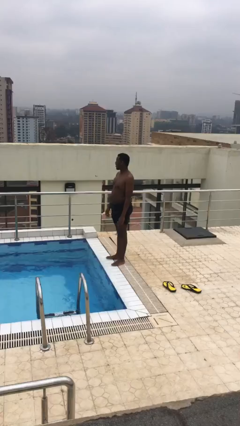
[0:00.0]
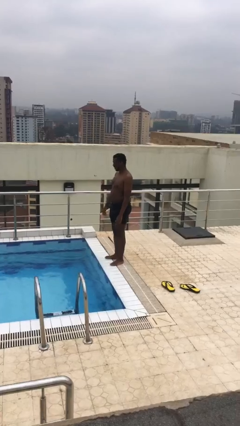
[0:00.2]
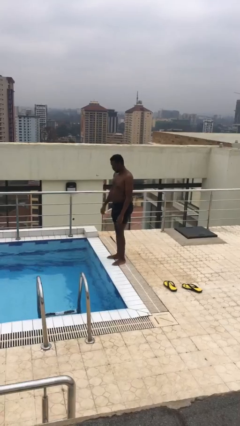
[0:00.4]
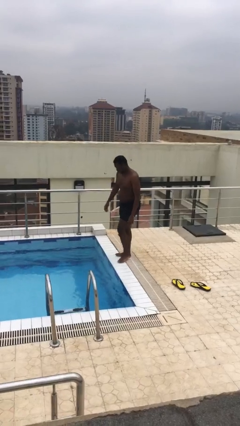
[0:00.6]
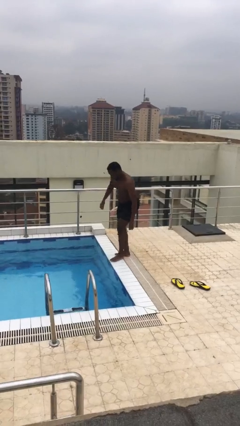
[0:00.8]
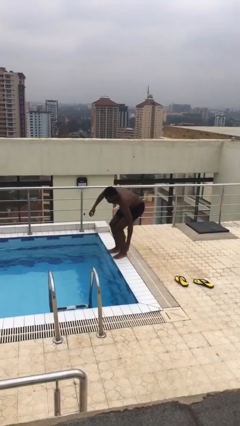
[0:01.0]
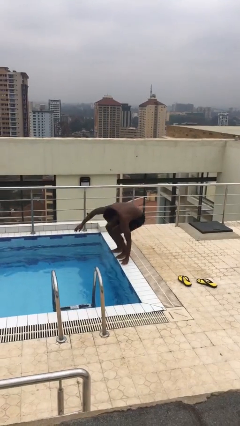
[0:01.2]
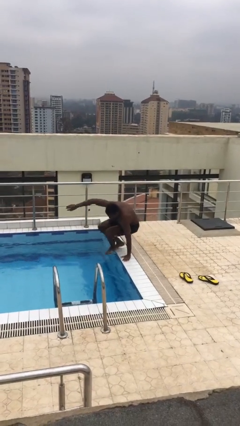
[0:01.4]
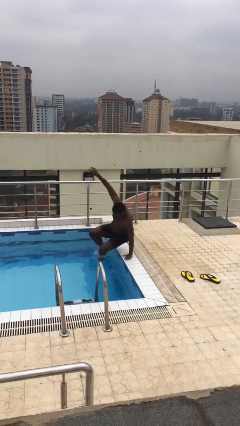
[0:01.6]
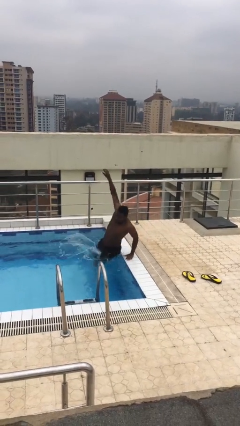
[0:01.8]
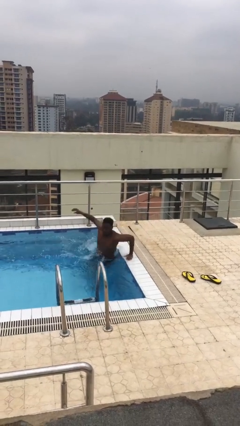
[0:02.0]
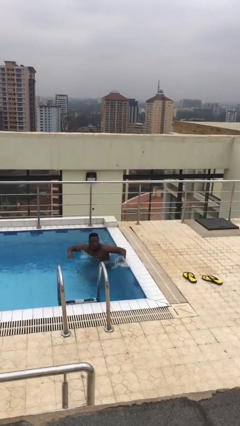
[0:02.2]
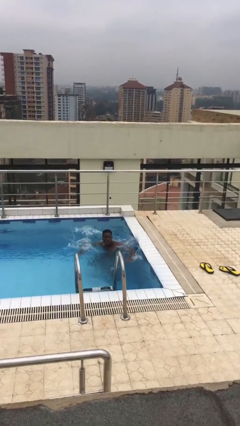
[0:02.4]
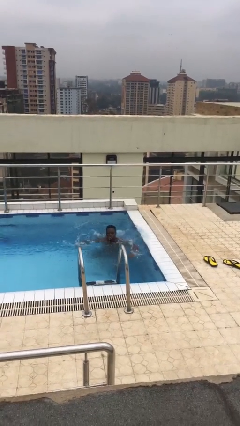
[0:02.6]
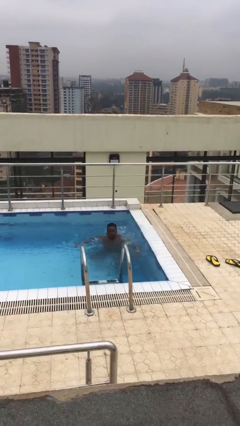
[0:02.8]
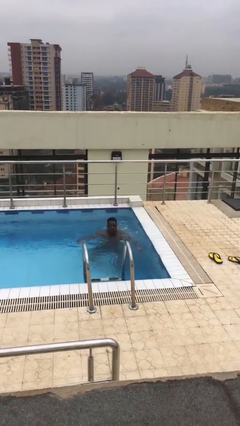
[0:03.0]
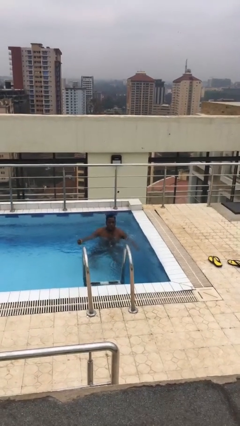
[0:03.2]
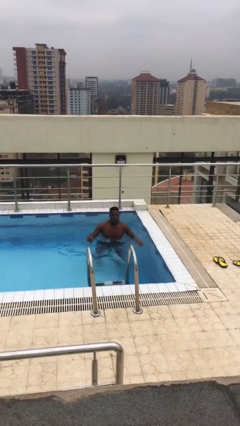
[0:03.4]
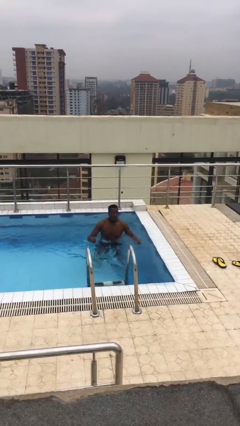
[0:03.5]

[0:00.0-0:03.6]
person jumps into pool

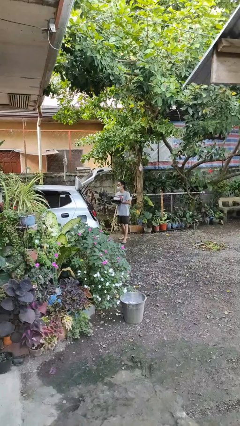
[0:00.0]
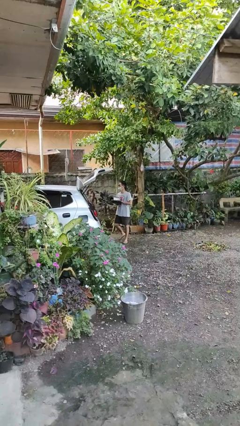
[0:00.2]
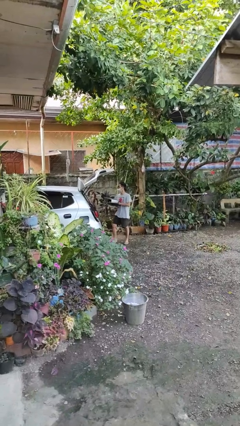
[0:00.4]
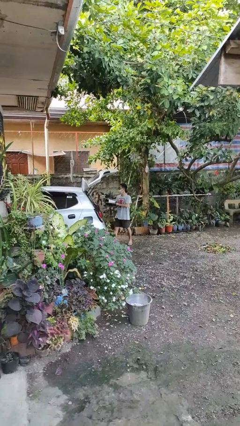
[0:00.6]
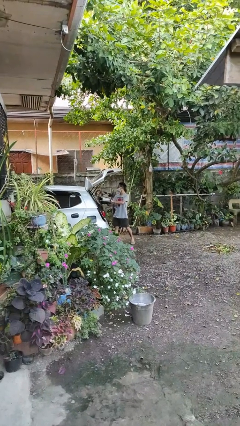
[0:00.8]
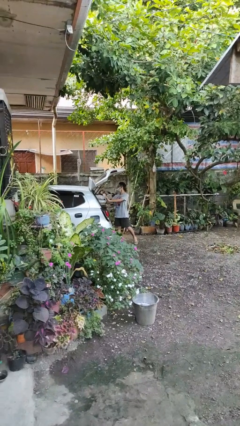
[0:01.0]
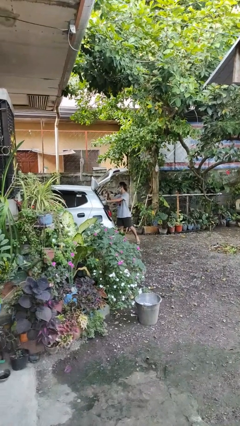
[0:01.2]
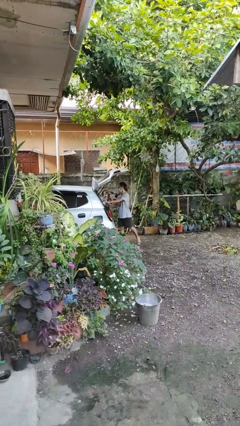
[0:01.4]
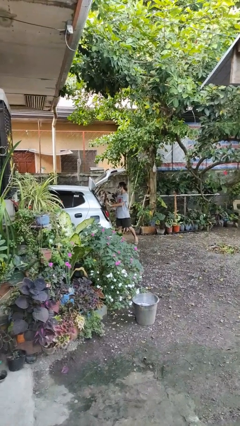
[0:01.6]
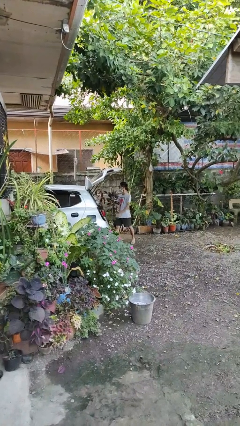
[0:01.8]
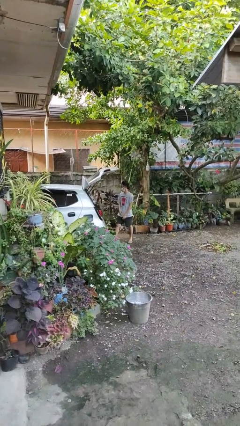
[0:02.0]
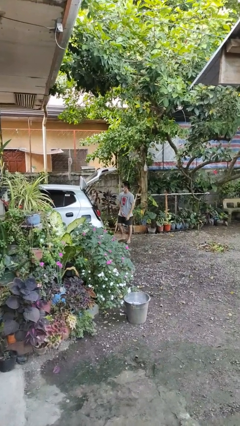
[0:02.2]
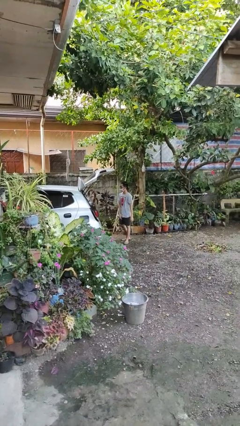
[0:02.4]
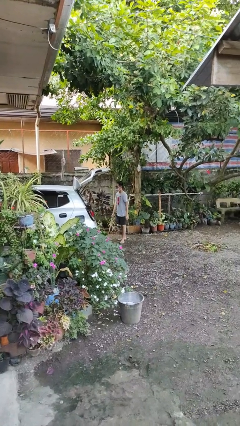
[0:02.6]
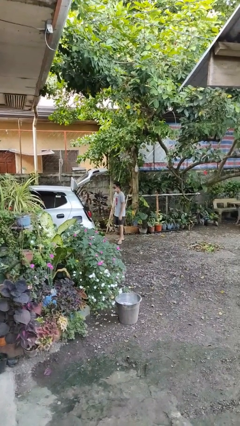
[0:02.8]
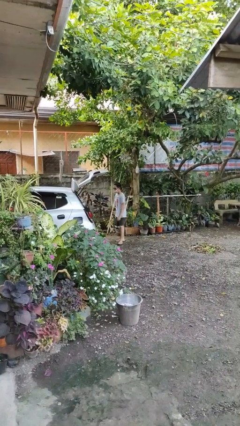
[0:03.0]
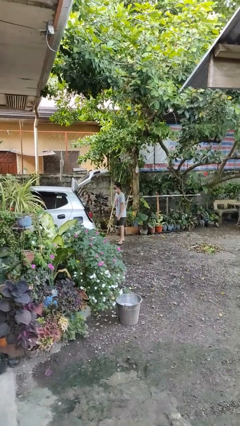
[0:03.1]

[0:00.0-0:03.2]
person loads car

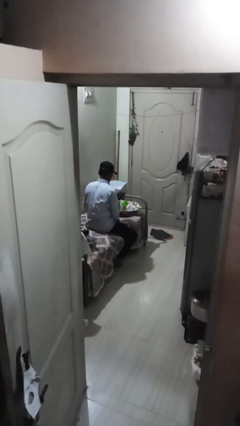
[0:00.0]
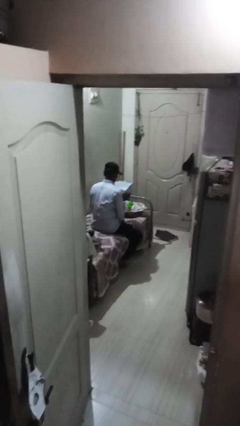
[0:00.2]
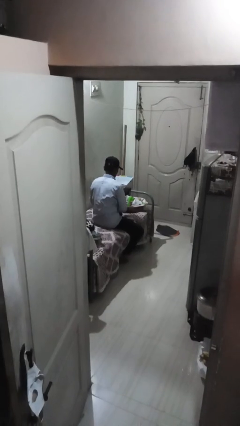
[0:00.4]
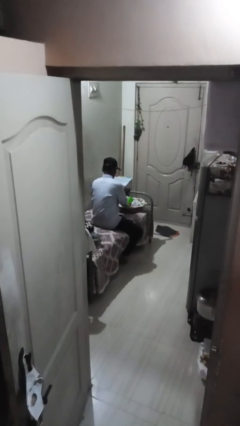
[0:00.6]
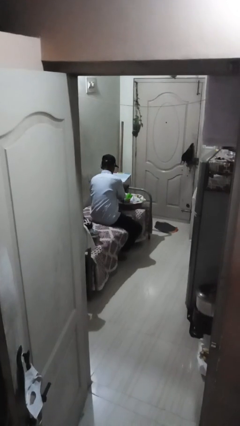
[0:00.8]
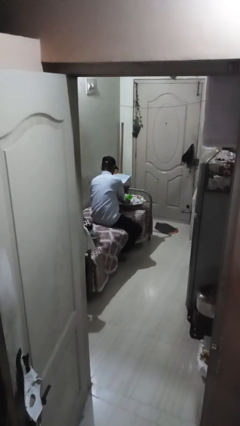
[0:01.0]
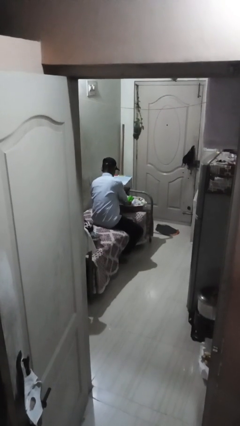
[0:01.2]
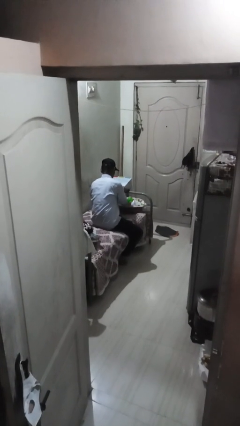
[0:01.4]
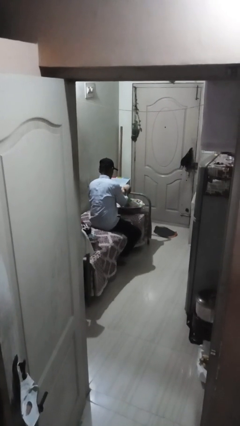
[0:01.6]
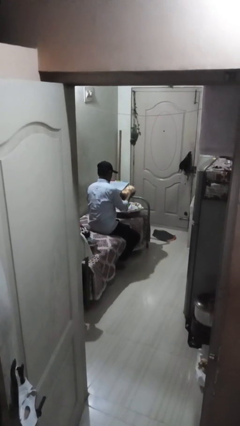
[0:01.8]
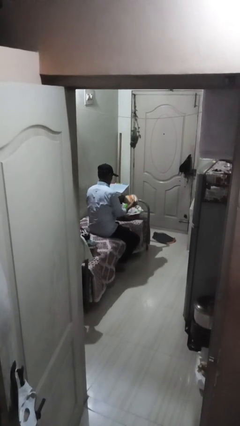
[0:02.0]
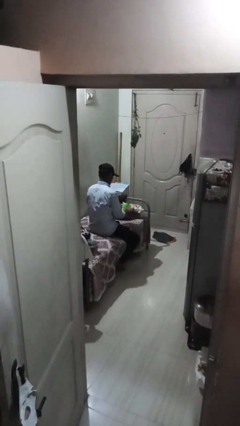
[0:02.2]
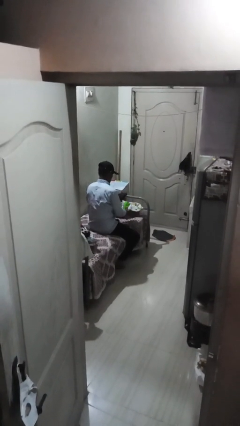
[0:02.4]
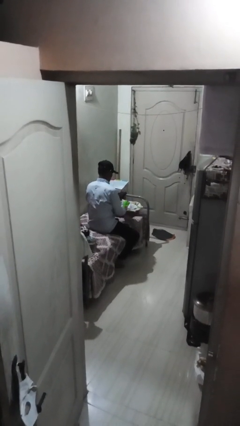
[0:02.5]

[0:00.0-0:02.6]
person takes object from bag

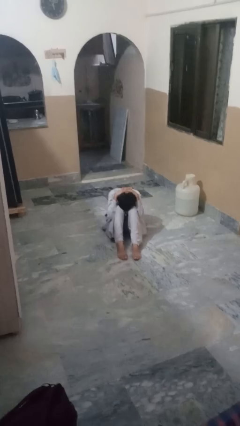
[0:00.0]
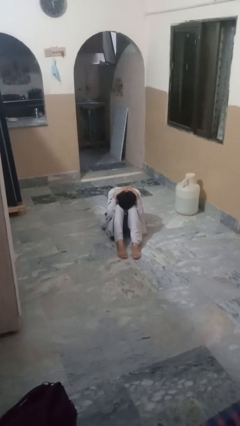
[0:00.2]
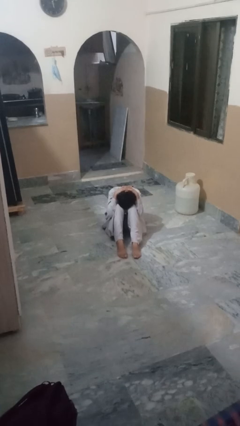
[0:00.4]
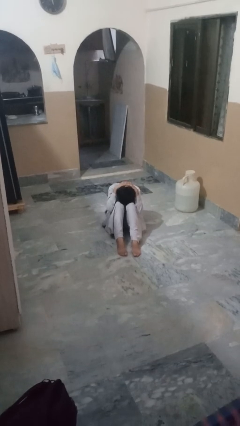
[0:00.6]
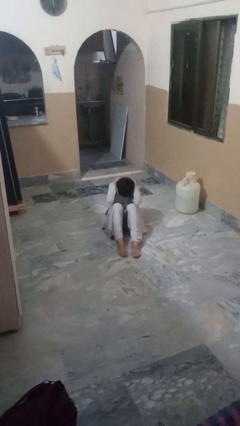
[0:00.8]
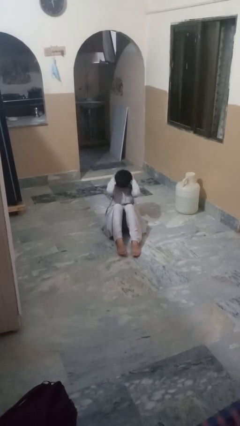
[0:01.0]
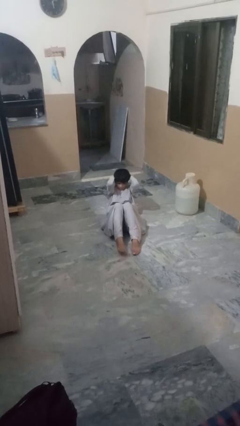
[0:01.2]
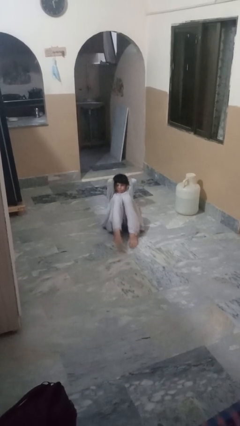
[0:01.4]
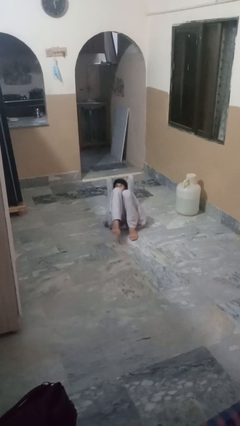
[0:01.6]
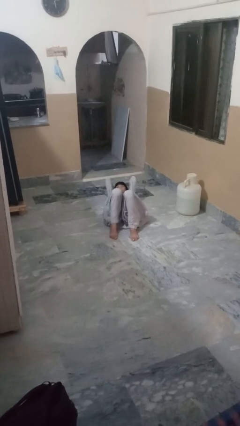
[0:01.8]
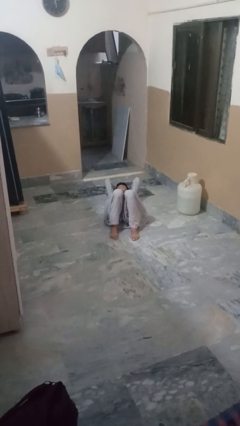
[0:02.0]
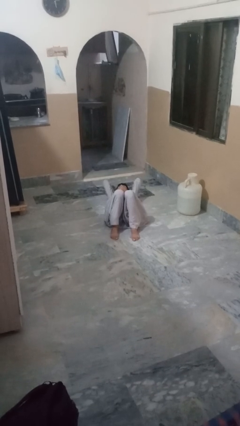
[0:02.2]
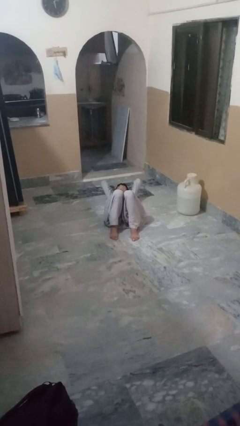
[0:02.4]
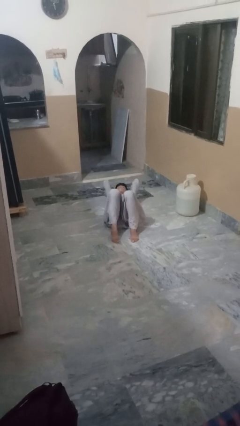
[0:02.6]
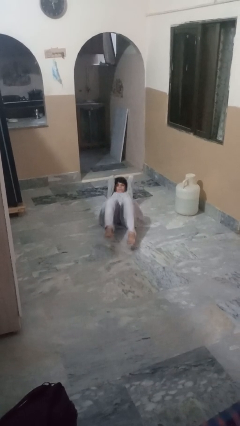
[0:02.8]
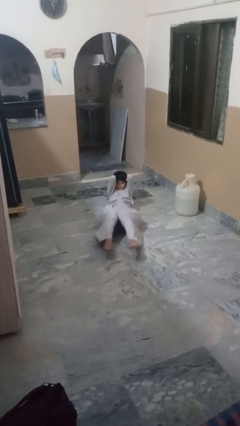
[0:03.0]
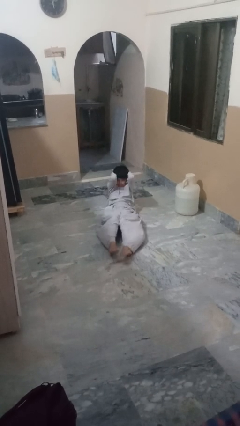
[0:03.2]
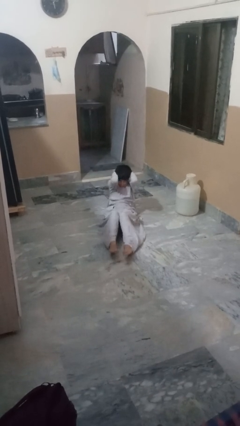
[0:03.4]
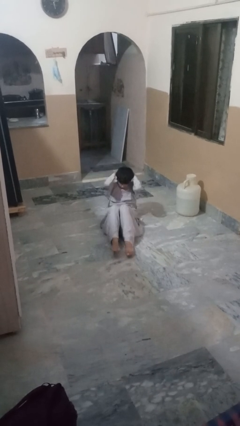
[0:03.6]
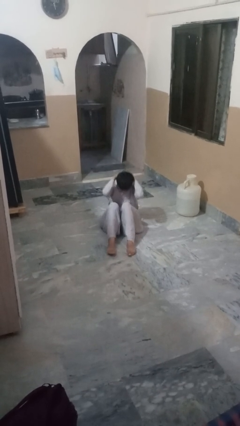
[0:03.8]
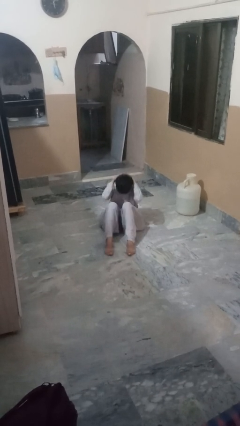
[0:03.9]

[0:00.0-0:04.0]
person exercises with situp

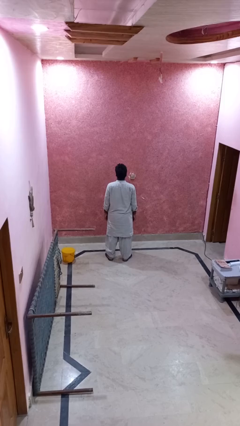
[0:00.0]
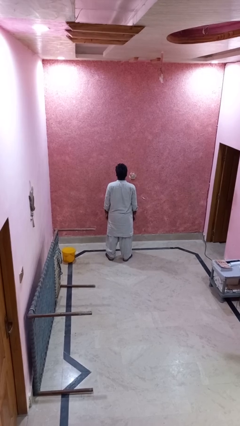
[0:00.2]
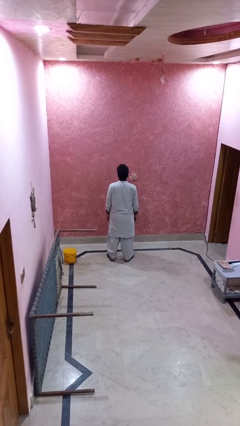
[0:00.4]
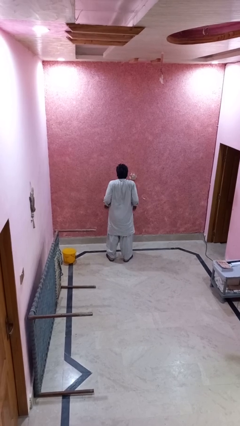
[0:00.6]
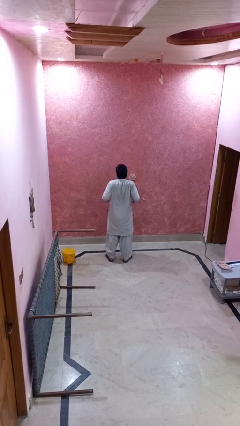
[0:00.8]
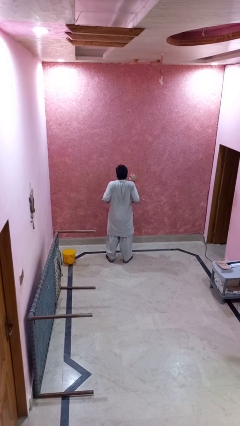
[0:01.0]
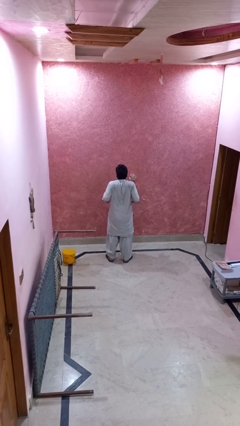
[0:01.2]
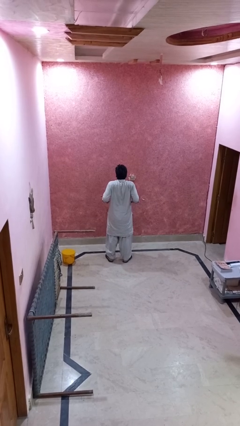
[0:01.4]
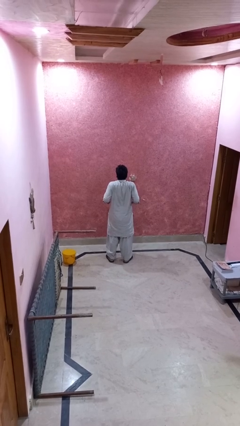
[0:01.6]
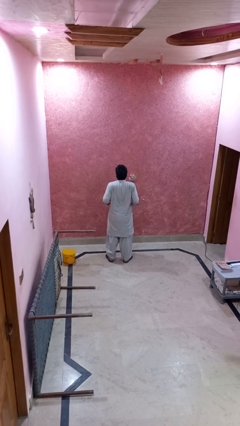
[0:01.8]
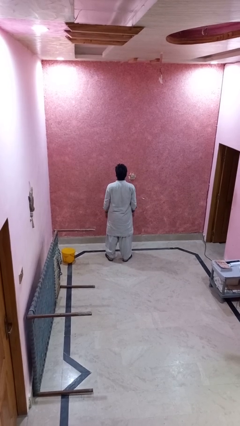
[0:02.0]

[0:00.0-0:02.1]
person shrugs

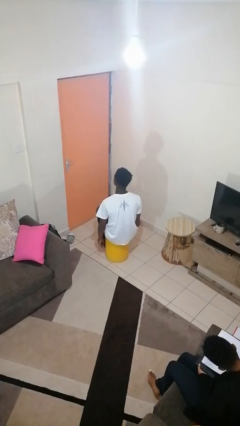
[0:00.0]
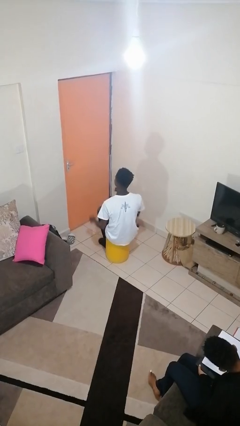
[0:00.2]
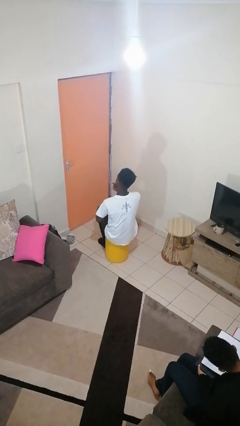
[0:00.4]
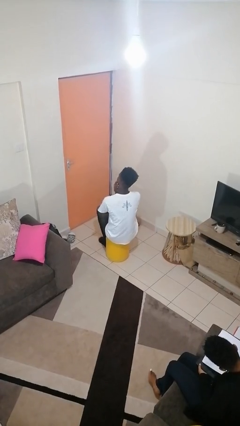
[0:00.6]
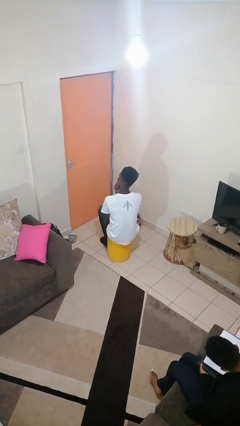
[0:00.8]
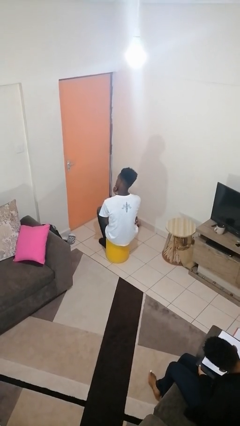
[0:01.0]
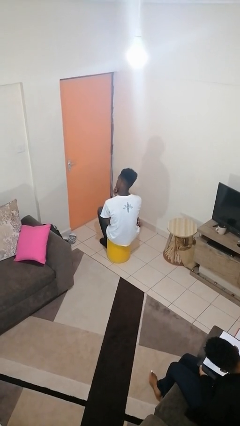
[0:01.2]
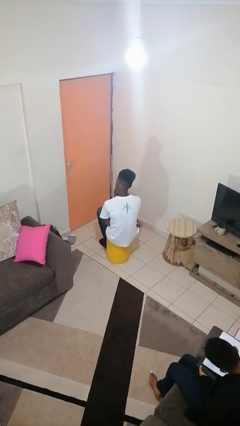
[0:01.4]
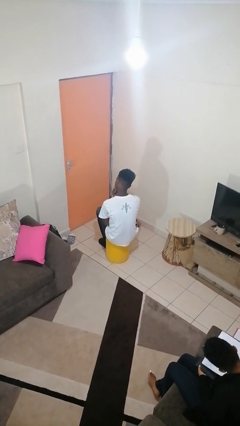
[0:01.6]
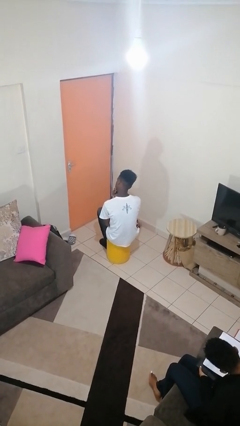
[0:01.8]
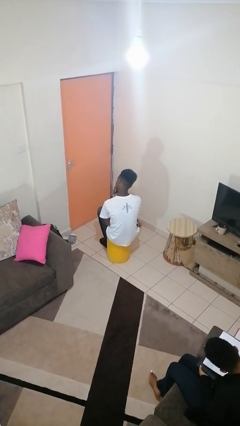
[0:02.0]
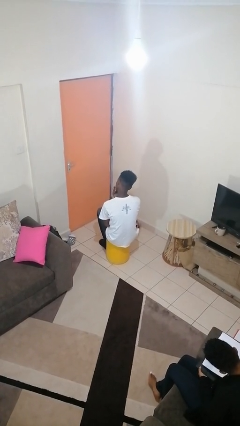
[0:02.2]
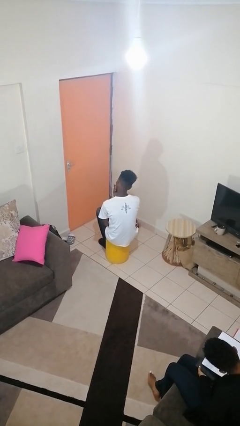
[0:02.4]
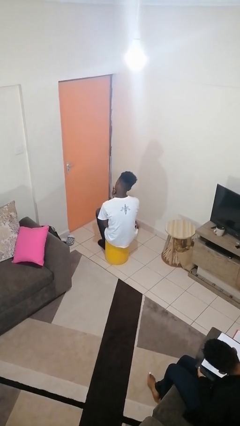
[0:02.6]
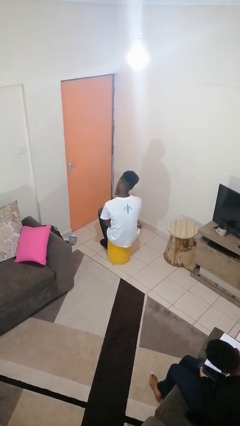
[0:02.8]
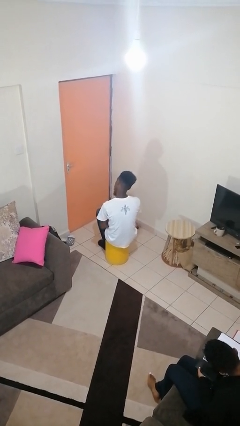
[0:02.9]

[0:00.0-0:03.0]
person strokes chin
